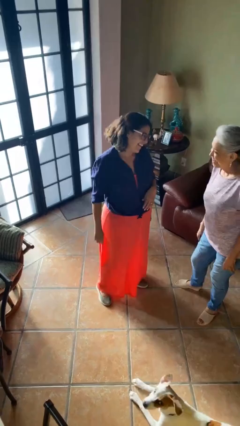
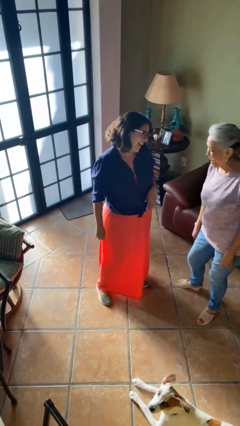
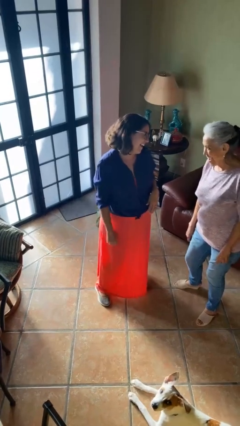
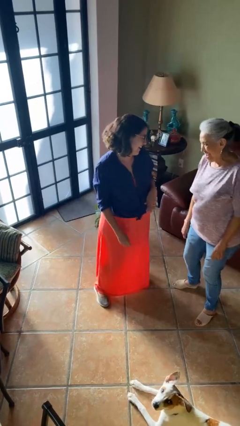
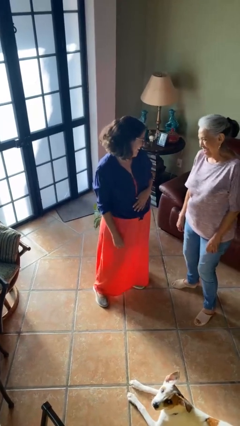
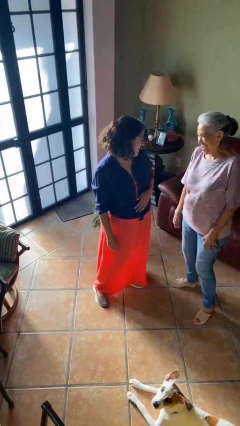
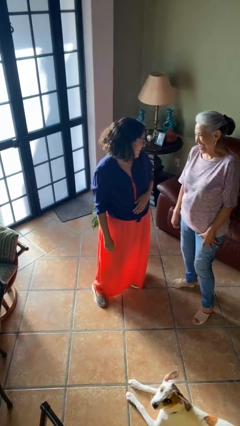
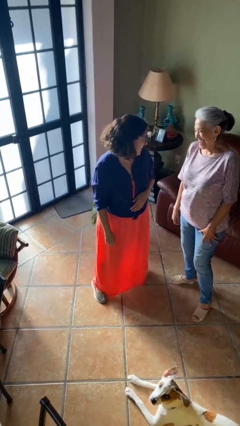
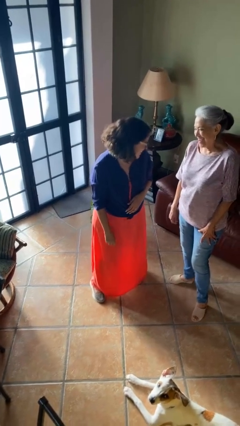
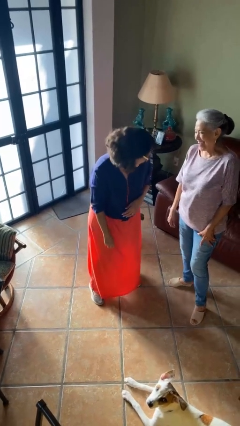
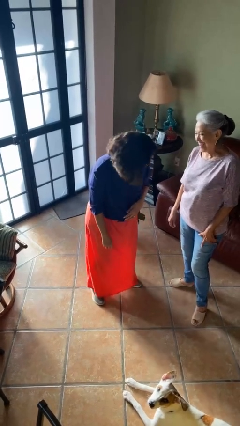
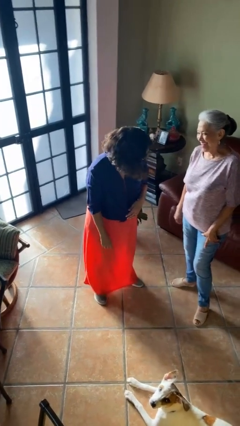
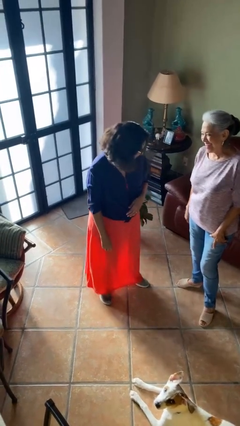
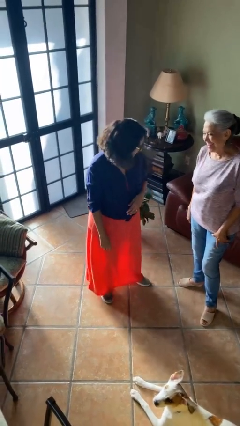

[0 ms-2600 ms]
person laughs with person

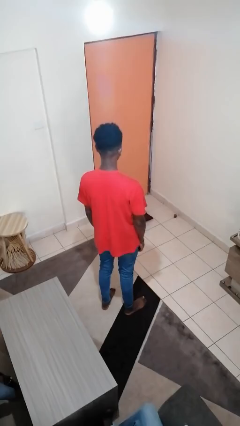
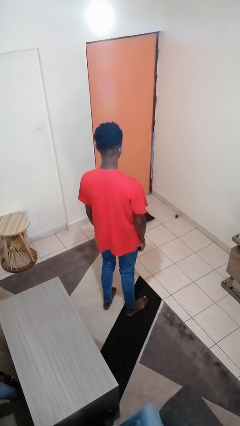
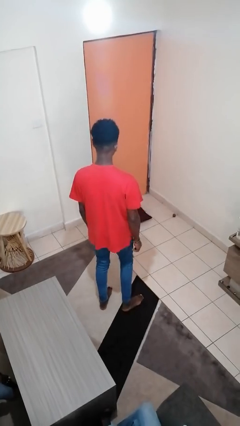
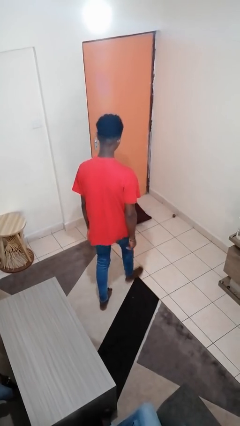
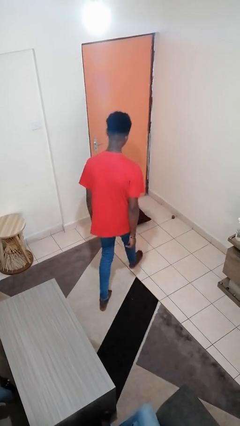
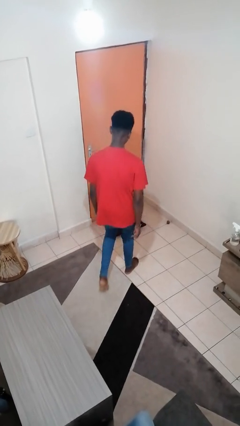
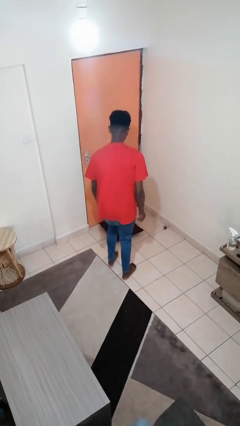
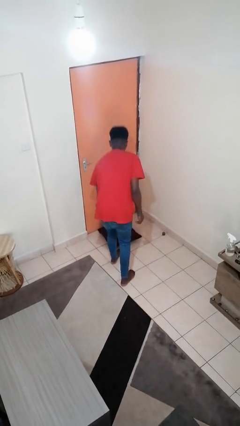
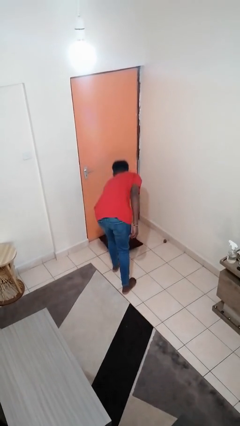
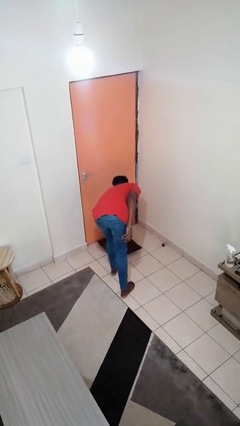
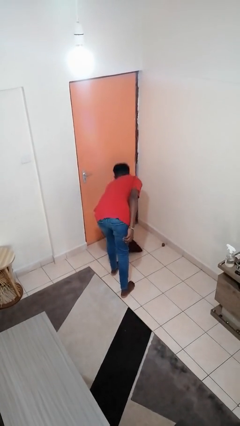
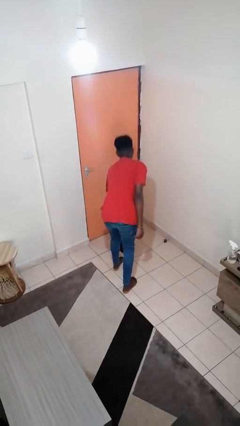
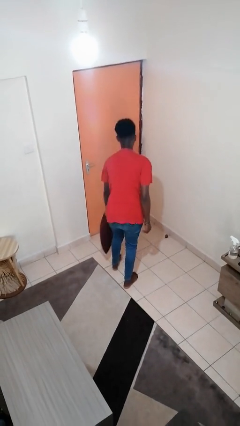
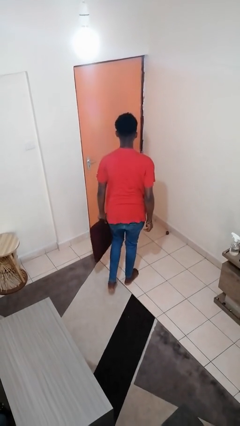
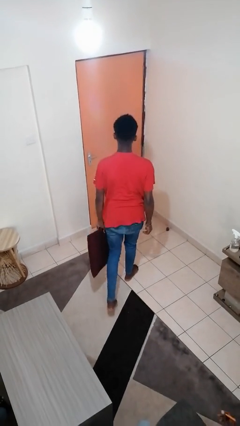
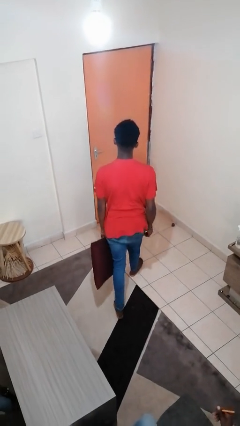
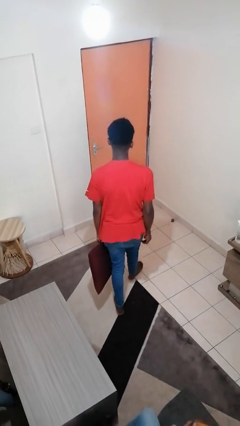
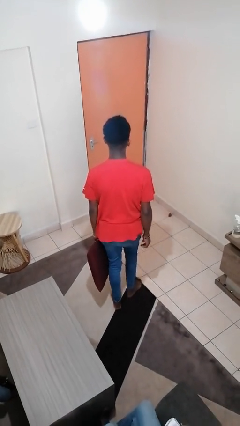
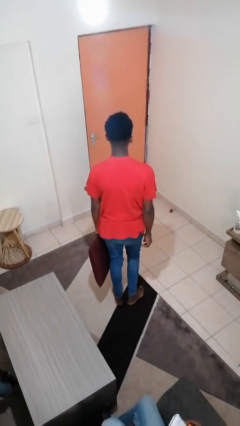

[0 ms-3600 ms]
person picks up object from floor

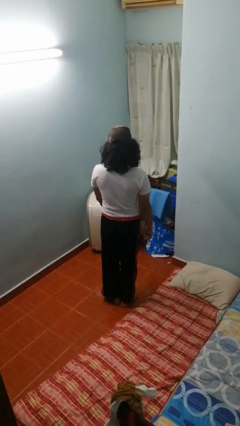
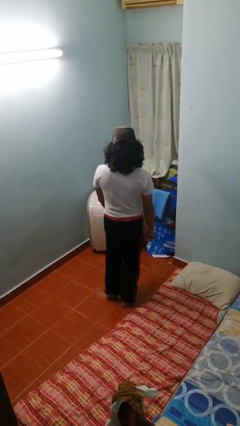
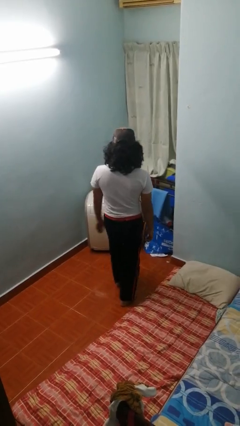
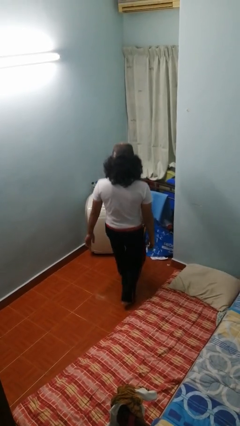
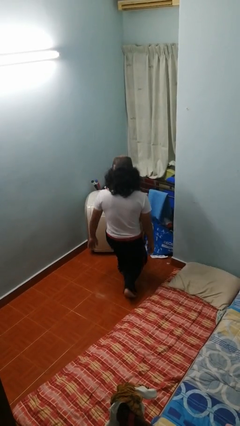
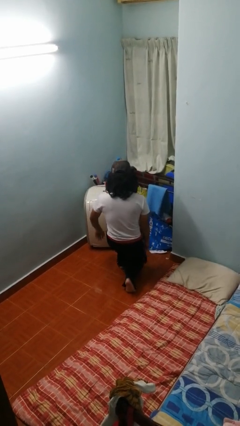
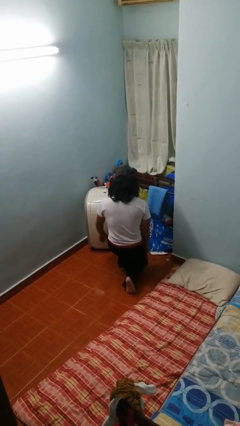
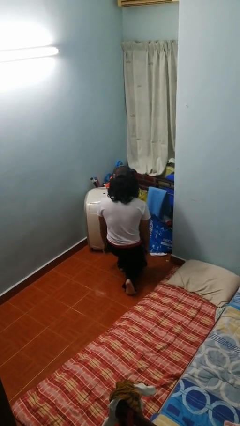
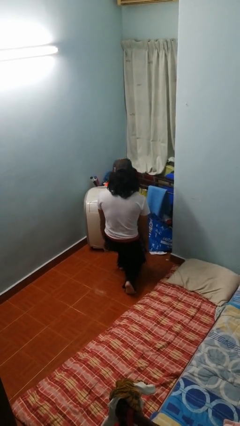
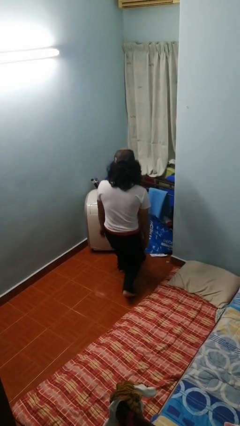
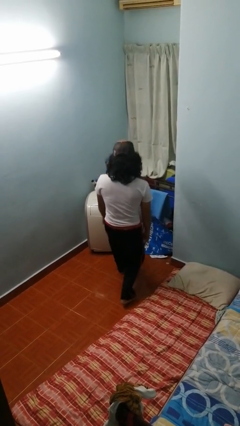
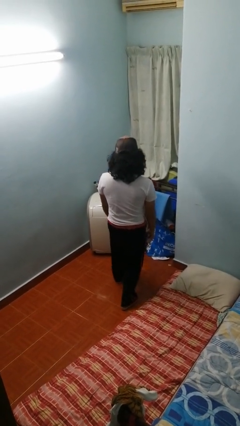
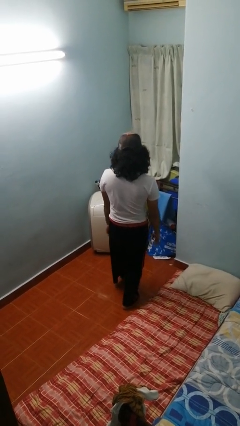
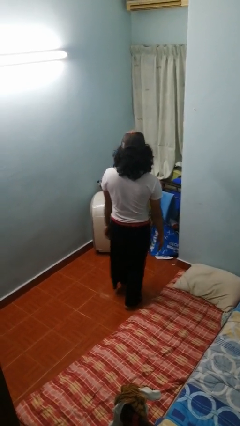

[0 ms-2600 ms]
person exercises with lunges

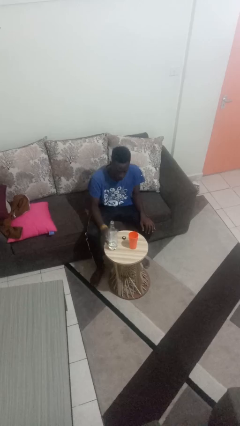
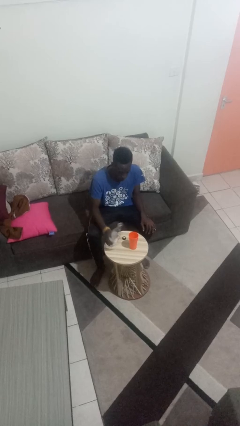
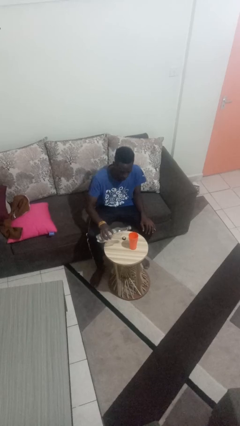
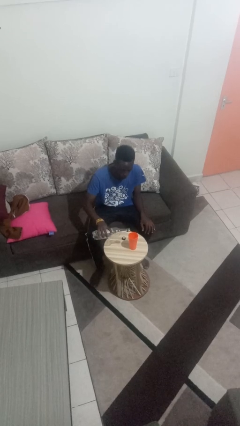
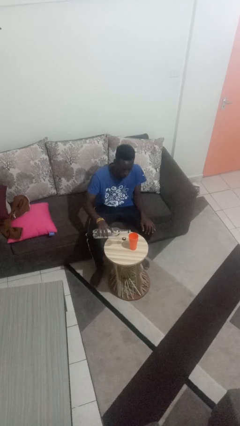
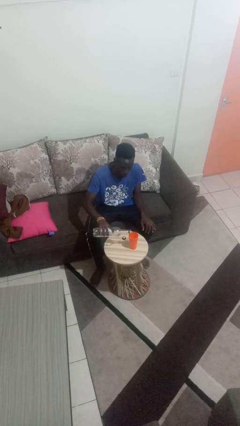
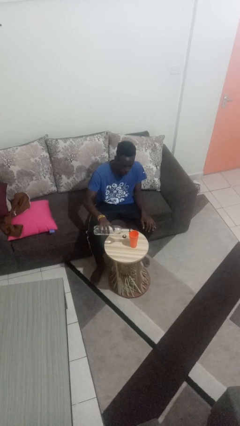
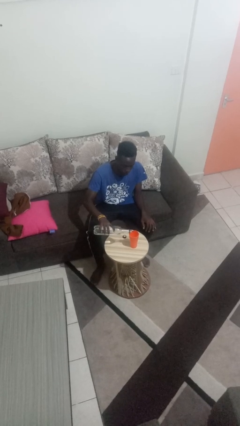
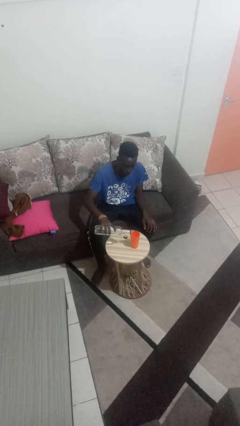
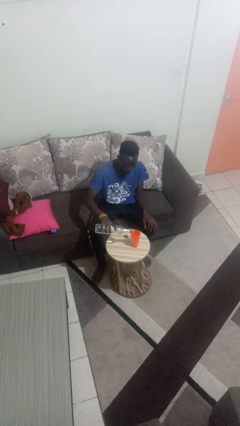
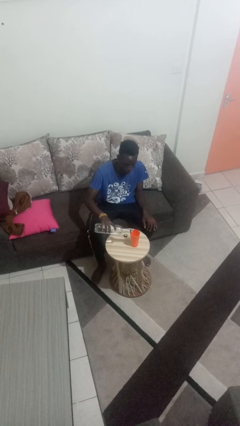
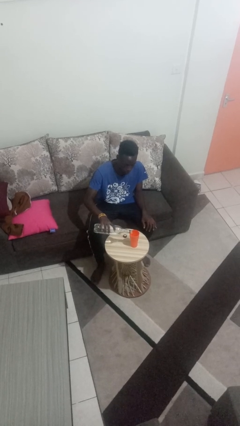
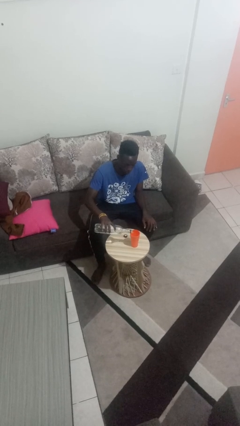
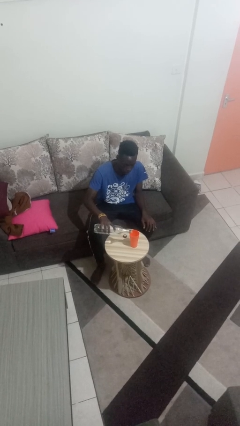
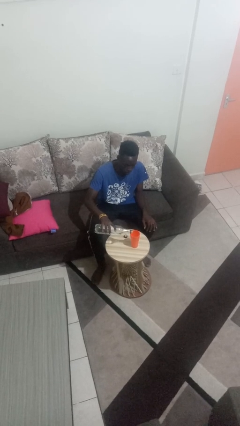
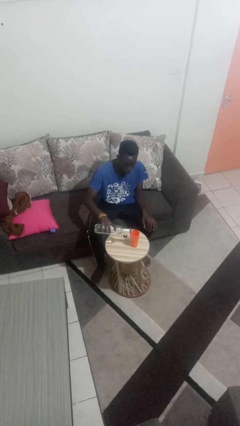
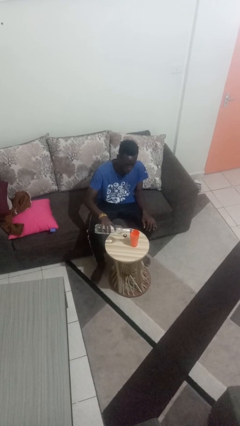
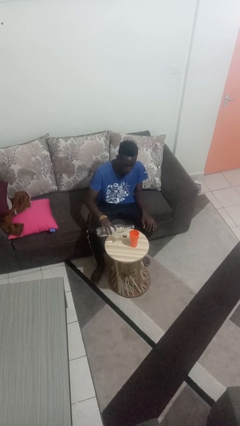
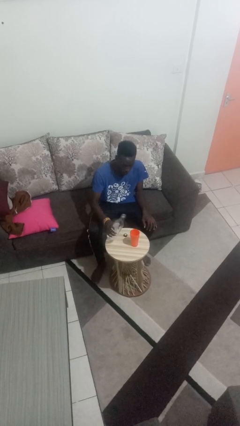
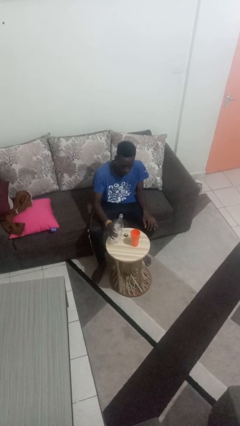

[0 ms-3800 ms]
person pours liquid into cup

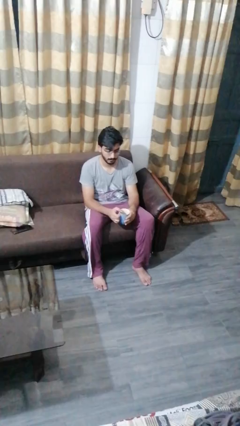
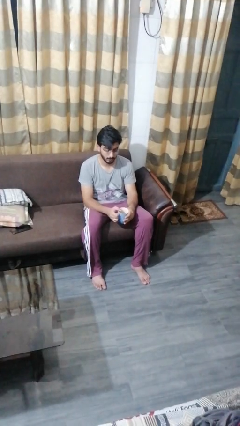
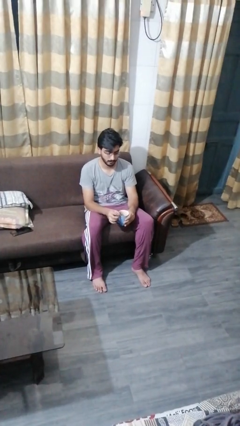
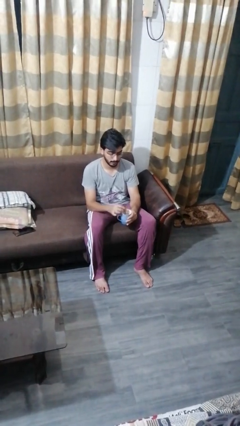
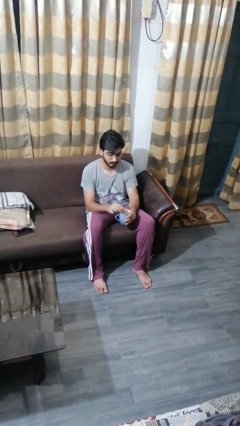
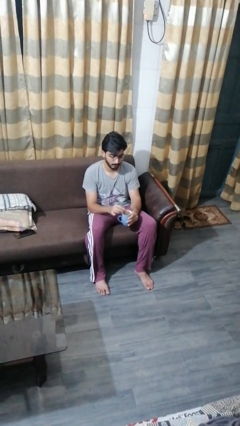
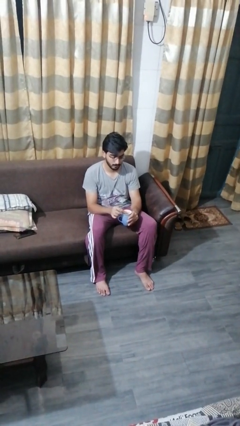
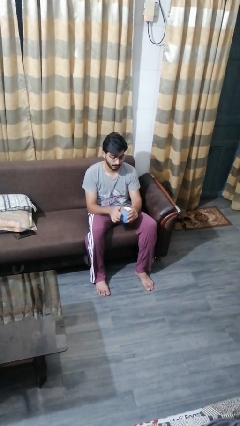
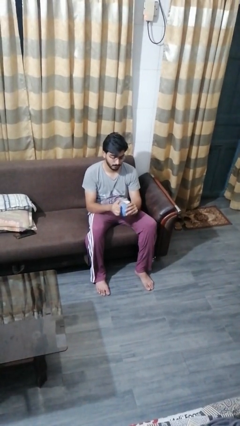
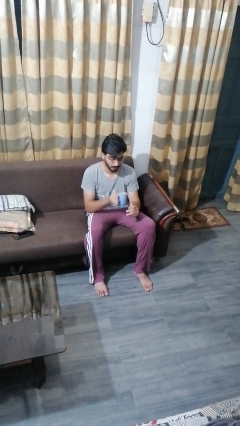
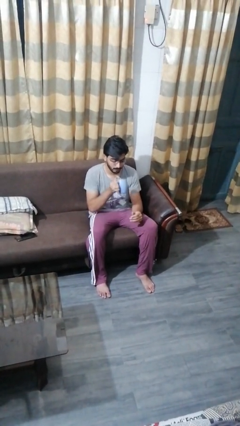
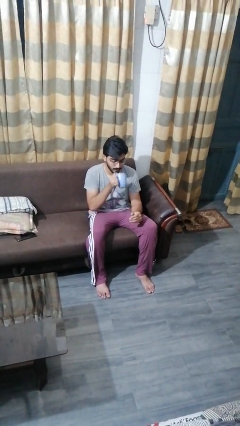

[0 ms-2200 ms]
person stirs mug

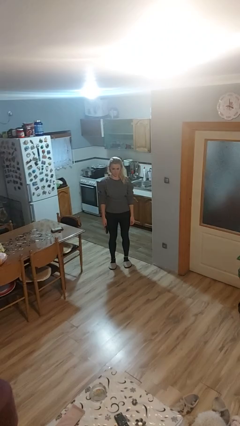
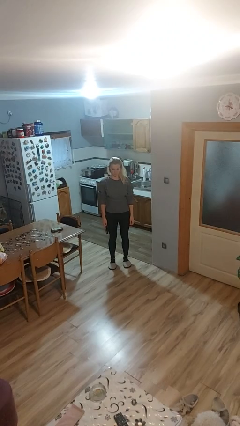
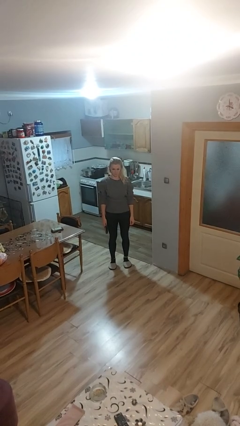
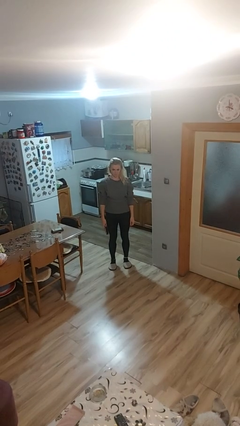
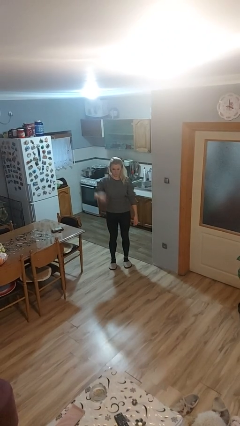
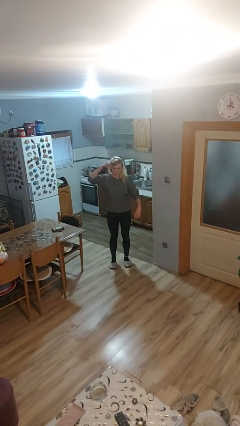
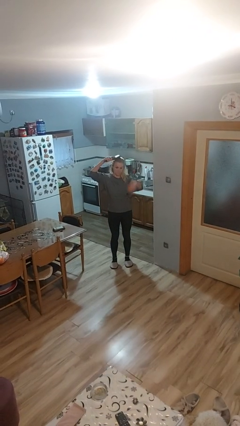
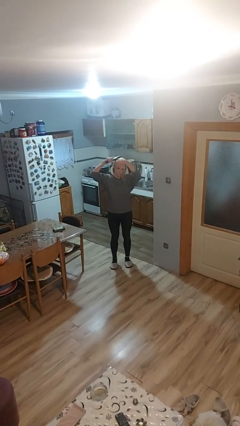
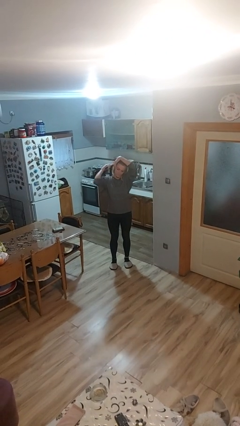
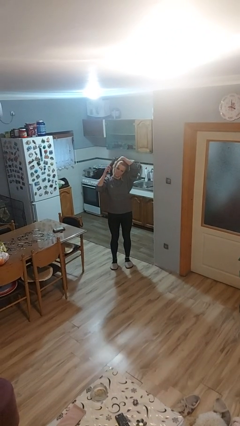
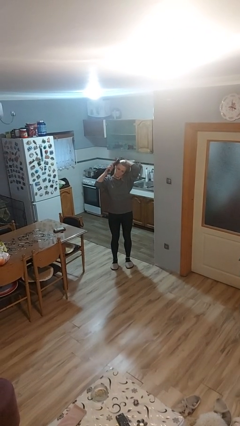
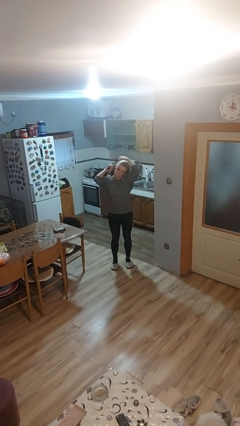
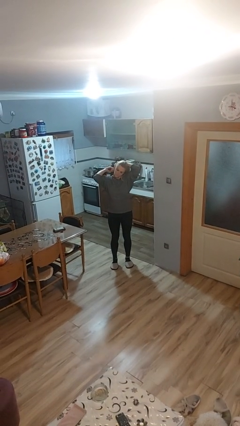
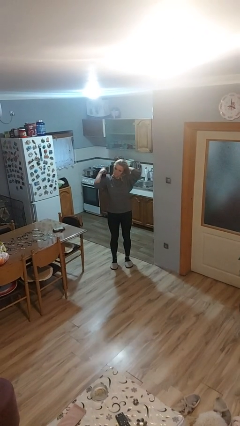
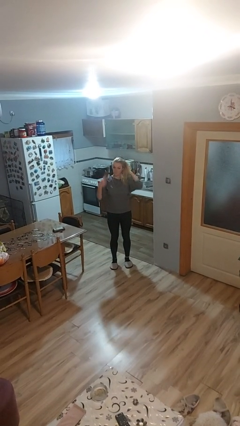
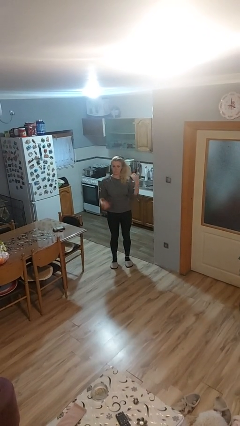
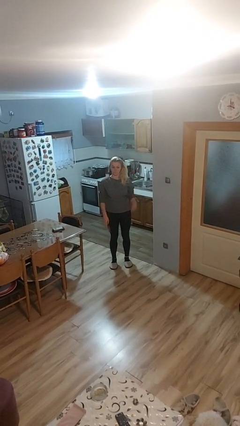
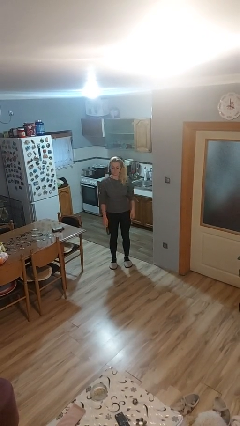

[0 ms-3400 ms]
person brushes hair
